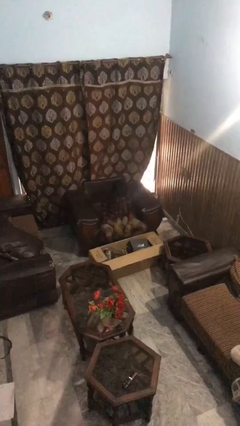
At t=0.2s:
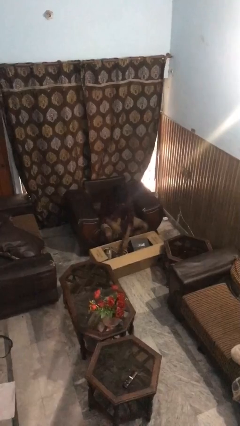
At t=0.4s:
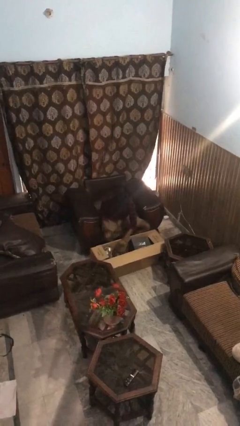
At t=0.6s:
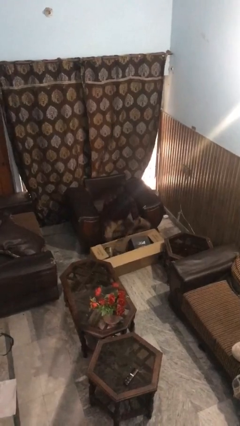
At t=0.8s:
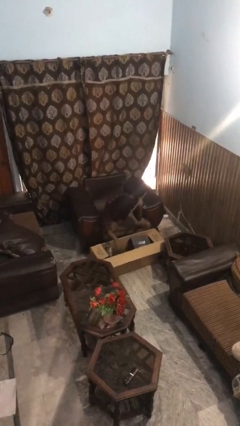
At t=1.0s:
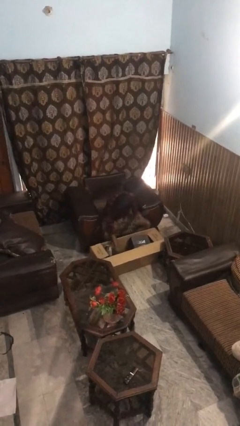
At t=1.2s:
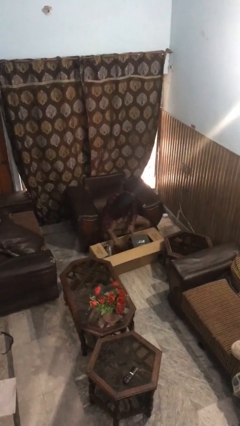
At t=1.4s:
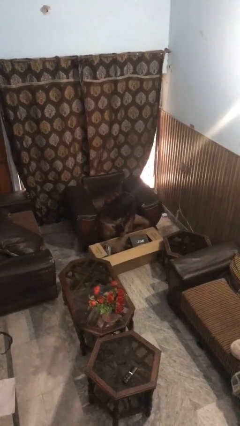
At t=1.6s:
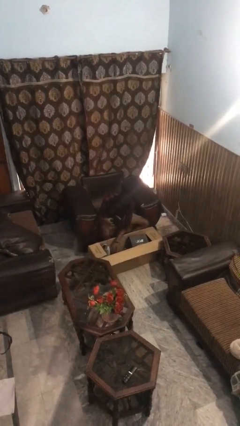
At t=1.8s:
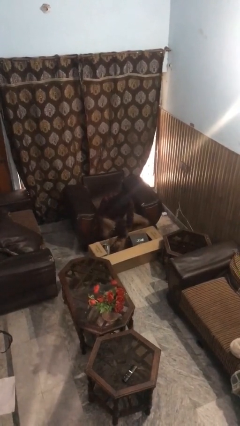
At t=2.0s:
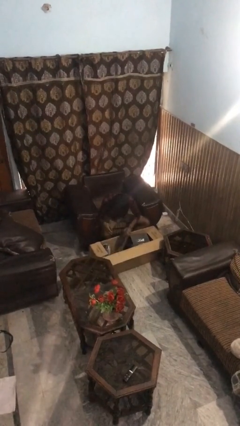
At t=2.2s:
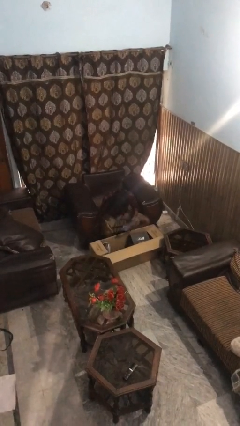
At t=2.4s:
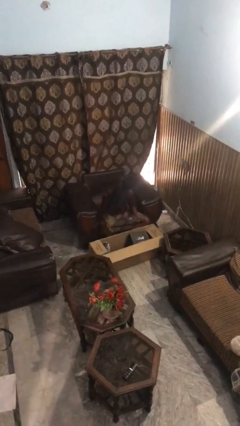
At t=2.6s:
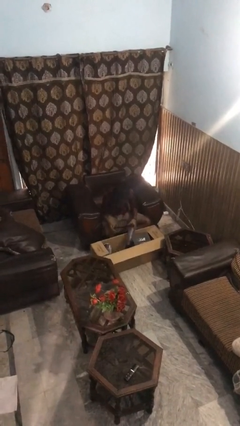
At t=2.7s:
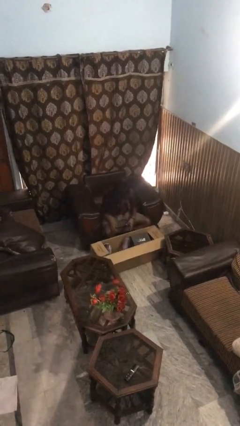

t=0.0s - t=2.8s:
person searches in box

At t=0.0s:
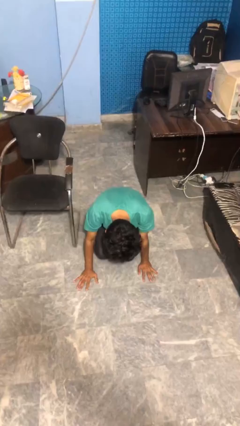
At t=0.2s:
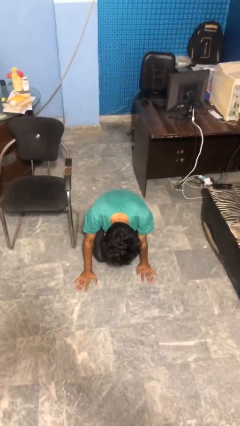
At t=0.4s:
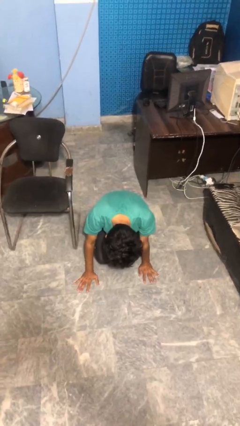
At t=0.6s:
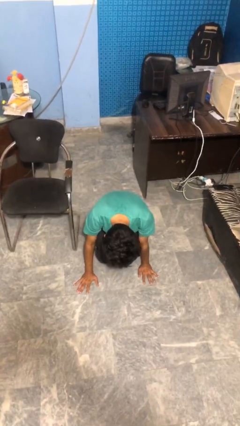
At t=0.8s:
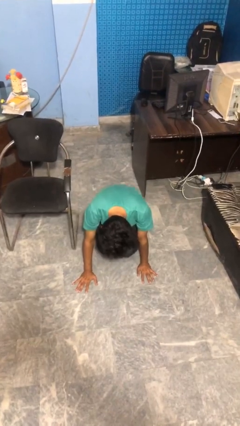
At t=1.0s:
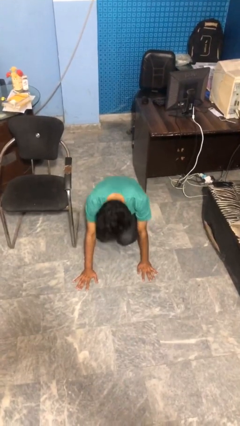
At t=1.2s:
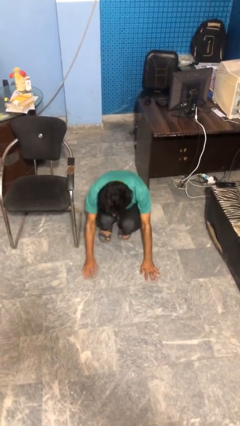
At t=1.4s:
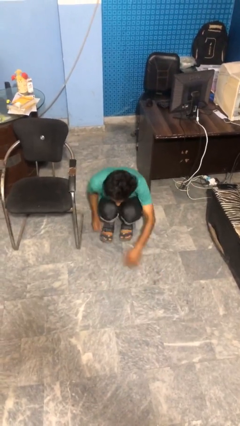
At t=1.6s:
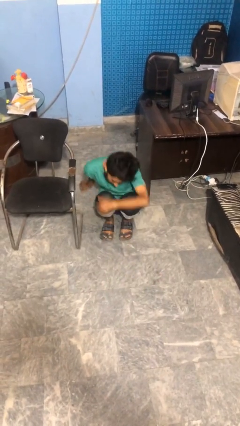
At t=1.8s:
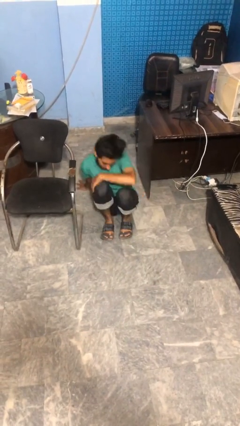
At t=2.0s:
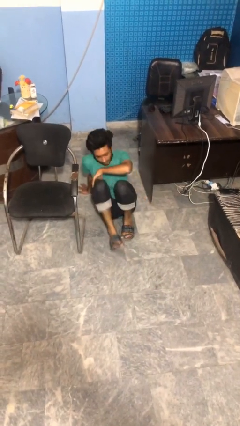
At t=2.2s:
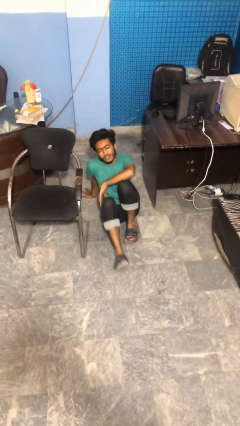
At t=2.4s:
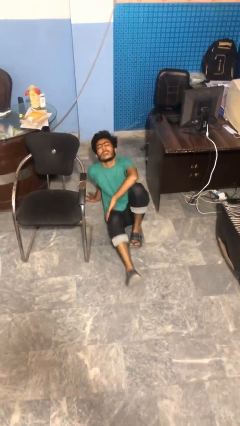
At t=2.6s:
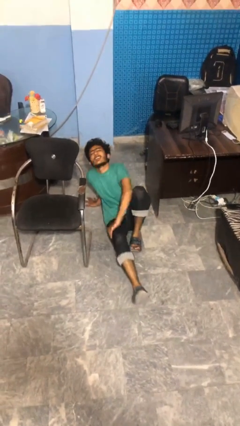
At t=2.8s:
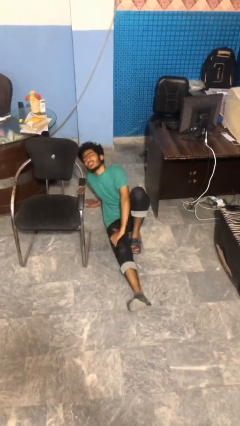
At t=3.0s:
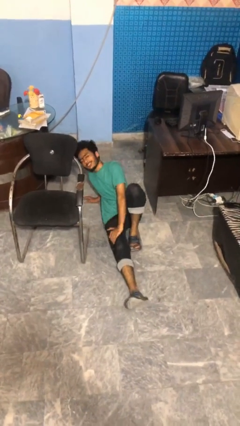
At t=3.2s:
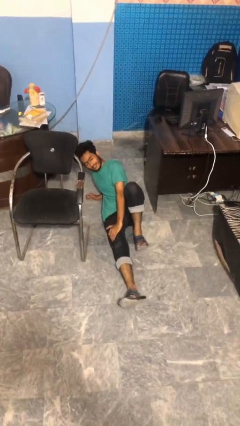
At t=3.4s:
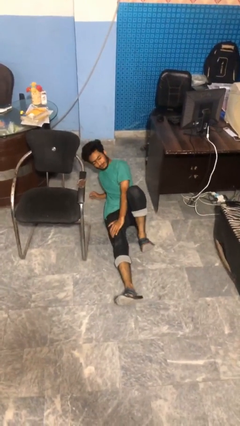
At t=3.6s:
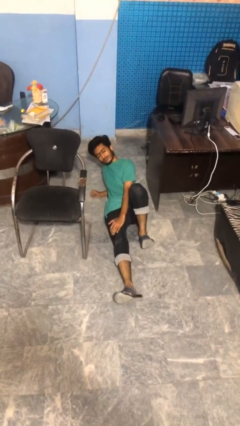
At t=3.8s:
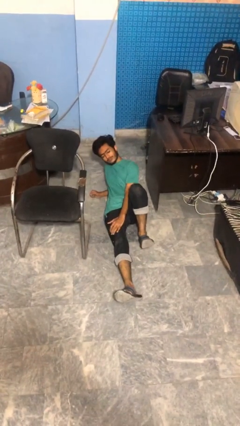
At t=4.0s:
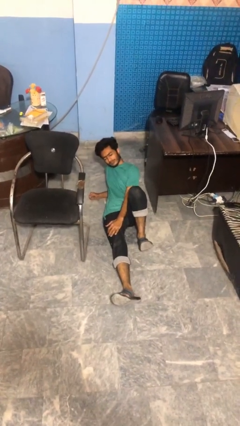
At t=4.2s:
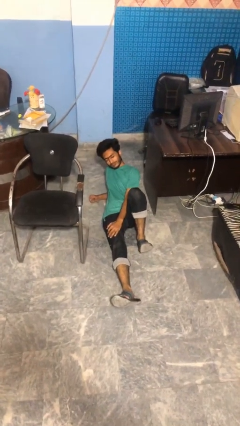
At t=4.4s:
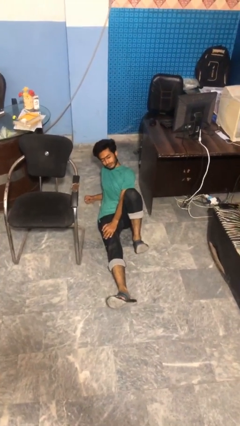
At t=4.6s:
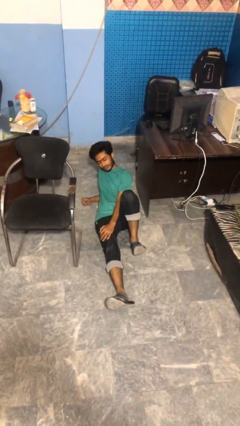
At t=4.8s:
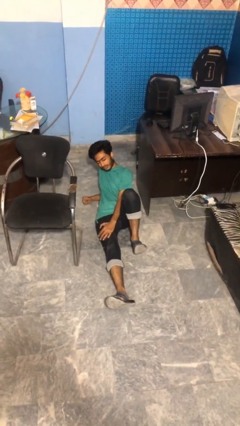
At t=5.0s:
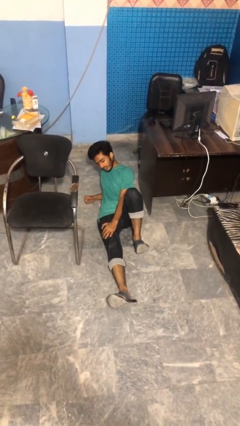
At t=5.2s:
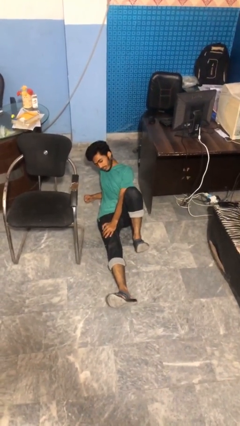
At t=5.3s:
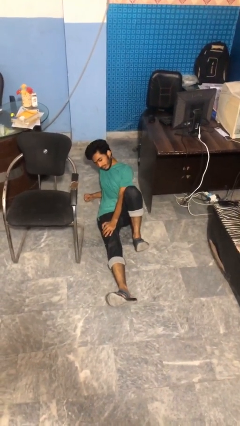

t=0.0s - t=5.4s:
person lies down on floor

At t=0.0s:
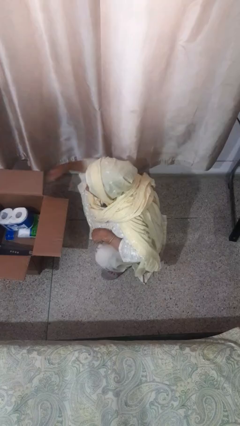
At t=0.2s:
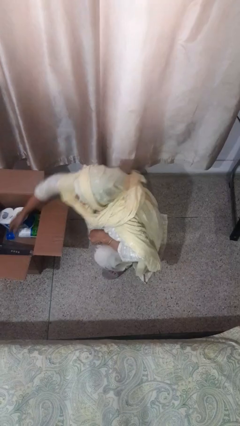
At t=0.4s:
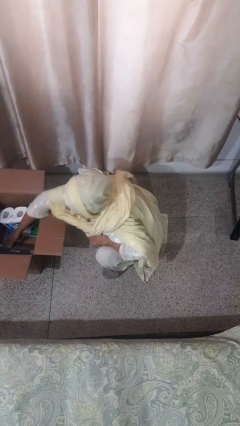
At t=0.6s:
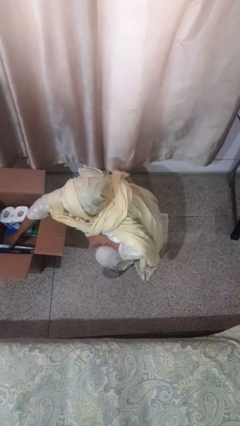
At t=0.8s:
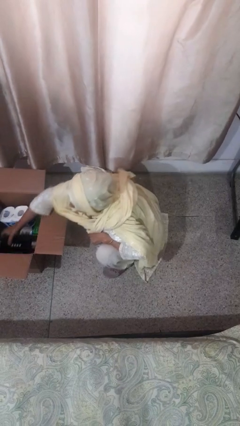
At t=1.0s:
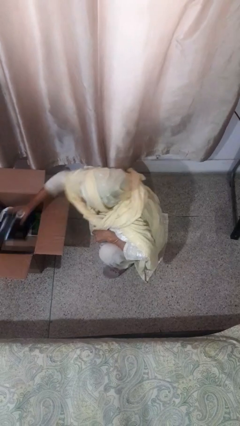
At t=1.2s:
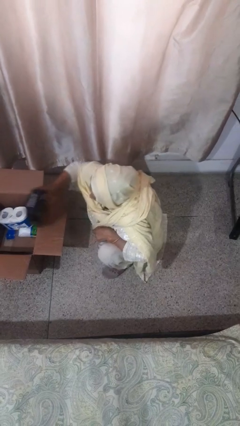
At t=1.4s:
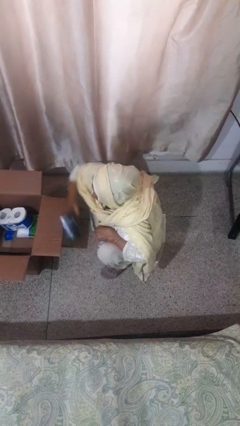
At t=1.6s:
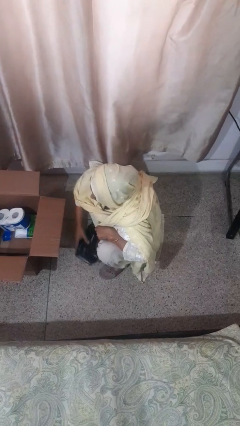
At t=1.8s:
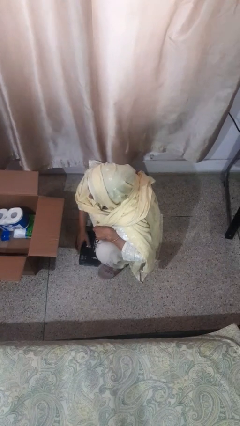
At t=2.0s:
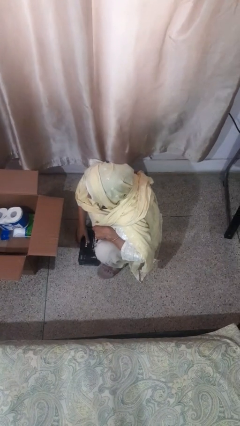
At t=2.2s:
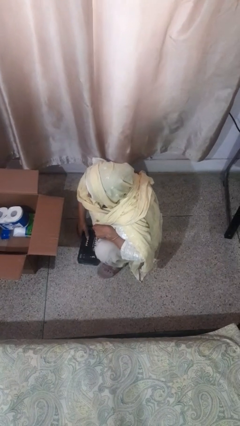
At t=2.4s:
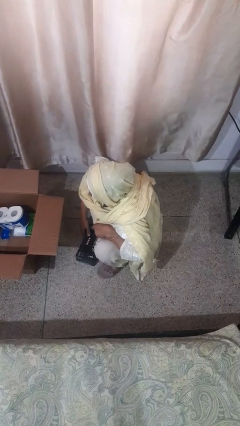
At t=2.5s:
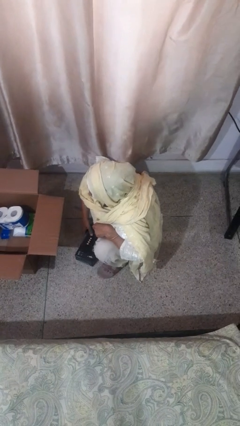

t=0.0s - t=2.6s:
person takes object from box

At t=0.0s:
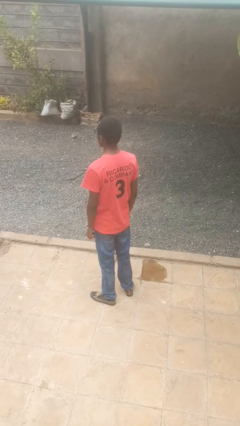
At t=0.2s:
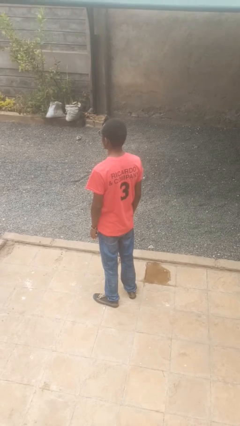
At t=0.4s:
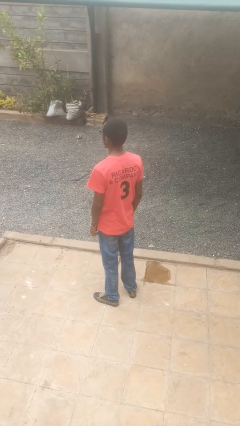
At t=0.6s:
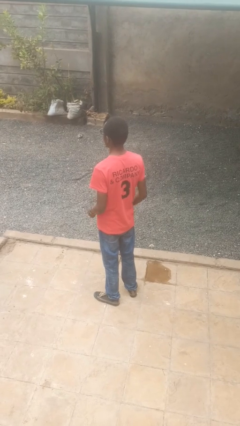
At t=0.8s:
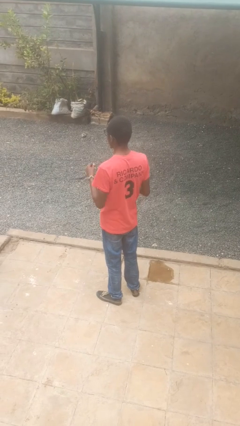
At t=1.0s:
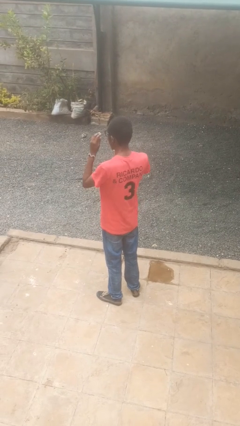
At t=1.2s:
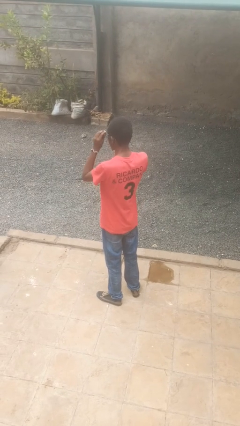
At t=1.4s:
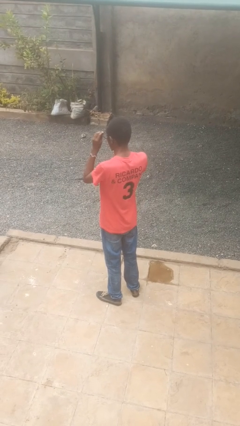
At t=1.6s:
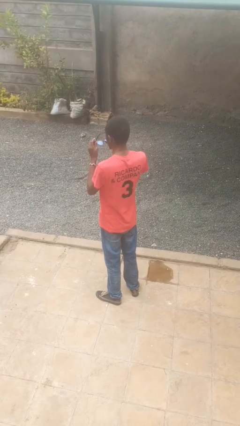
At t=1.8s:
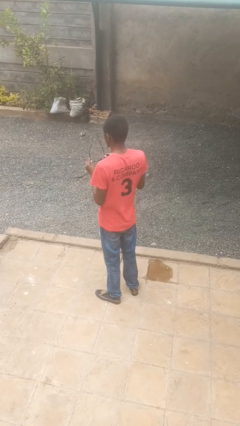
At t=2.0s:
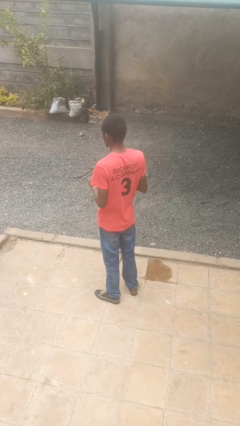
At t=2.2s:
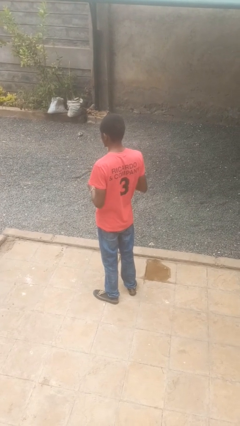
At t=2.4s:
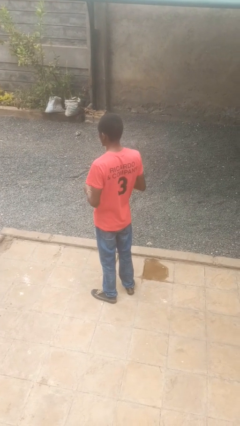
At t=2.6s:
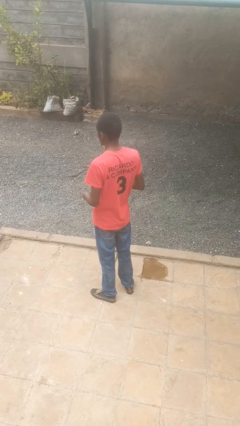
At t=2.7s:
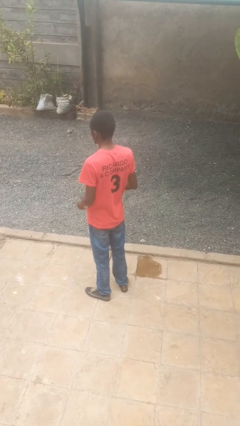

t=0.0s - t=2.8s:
person takes off glasses

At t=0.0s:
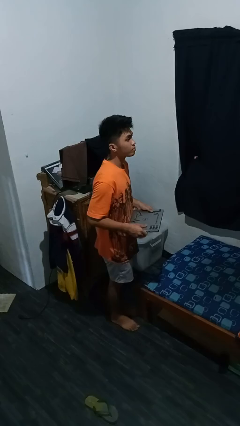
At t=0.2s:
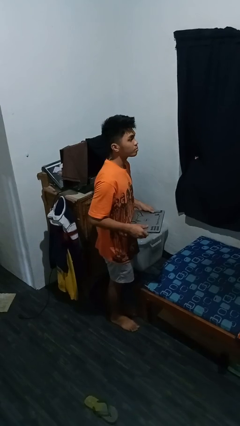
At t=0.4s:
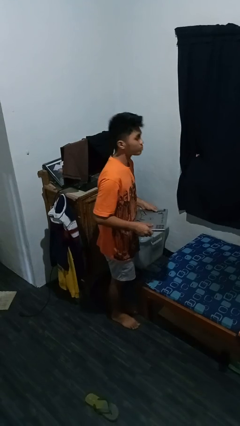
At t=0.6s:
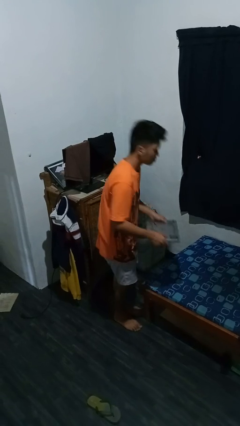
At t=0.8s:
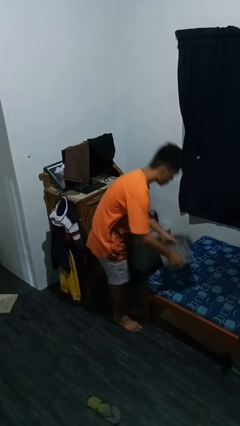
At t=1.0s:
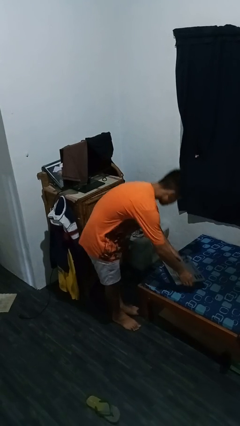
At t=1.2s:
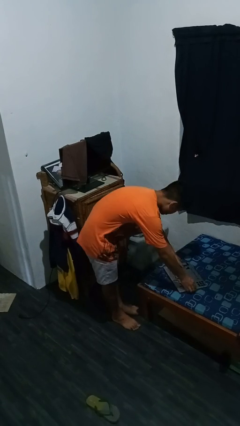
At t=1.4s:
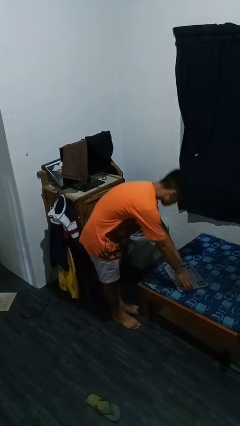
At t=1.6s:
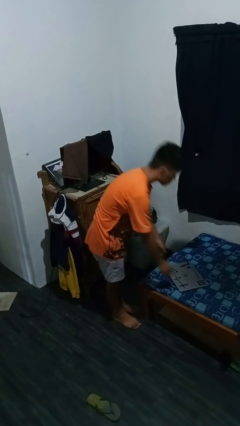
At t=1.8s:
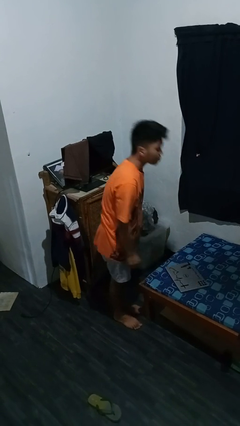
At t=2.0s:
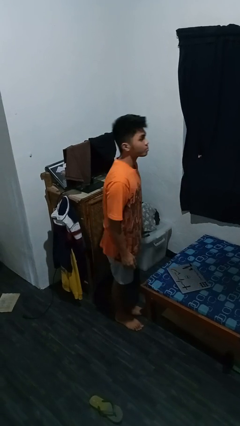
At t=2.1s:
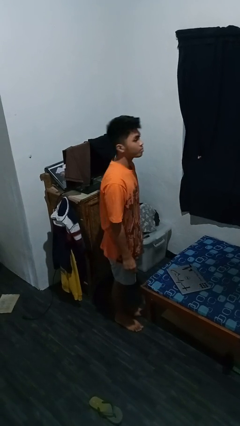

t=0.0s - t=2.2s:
person puts down object on bed

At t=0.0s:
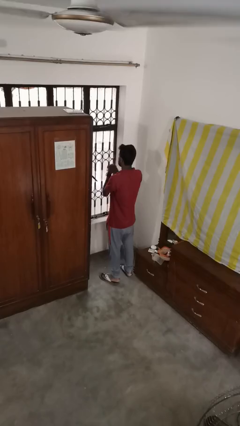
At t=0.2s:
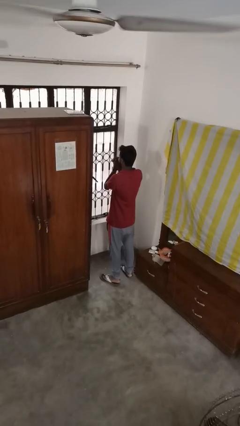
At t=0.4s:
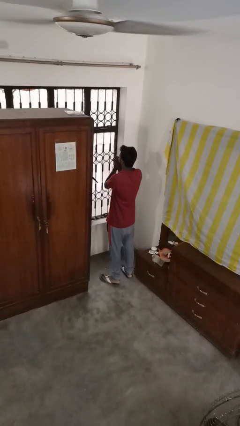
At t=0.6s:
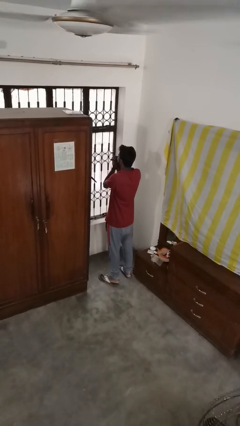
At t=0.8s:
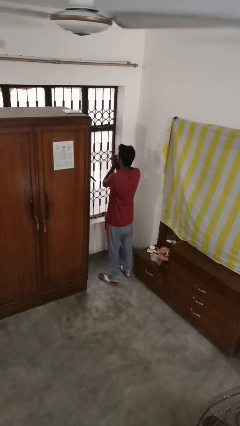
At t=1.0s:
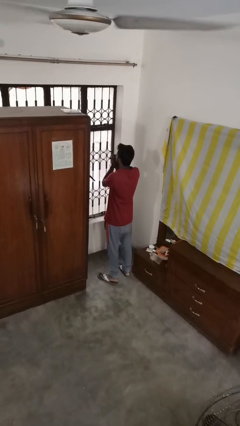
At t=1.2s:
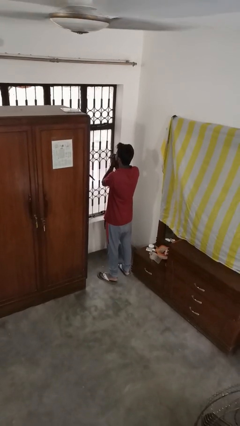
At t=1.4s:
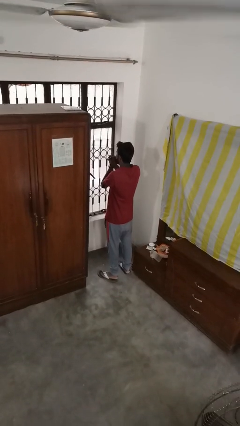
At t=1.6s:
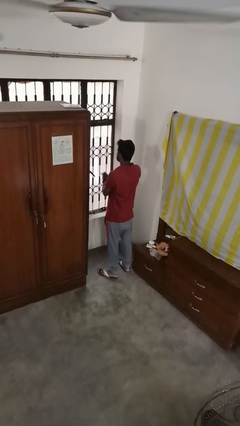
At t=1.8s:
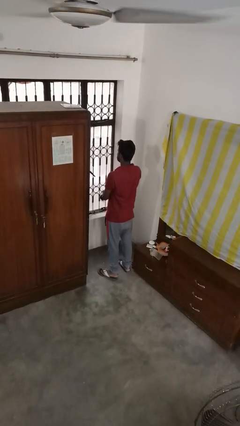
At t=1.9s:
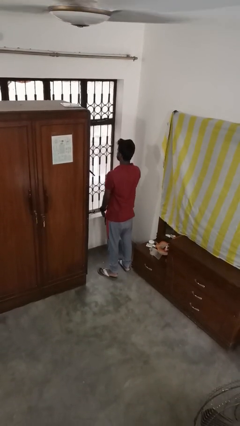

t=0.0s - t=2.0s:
person blows into hands
